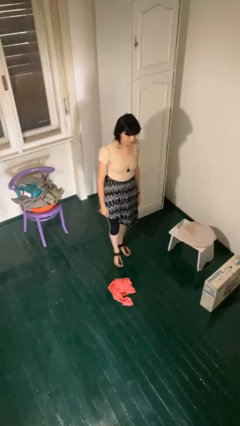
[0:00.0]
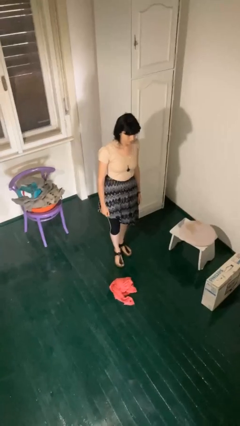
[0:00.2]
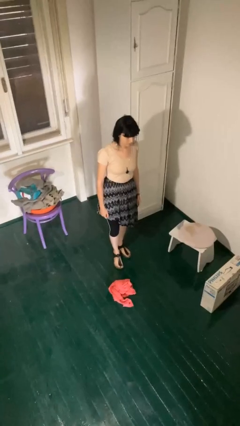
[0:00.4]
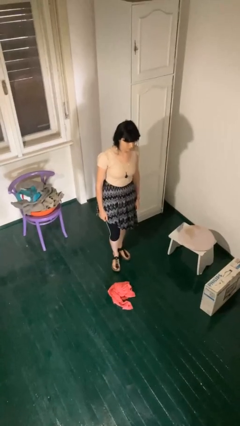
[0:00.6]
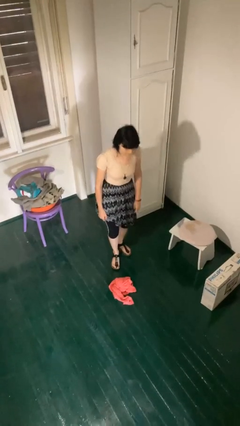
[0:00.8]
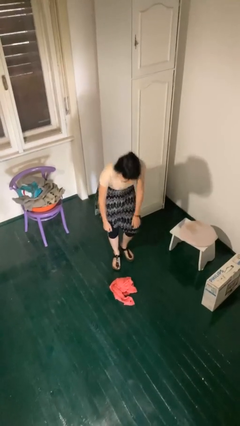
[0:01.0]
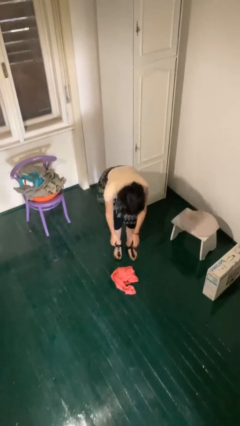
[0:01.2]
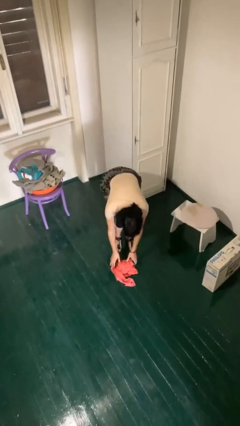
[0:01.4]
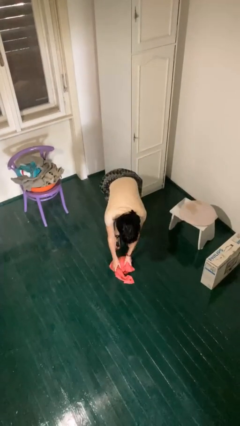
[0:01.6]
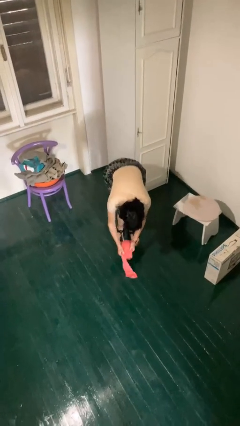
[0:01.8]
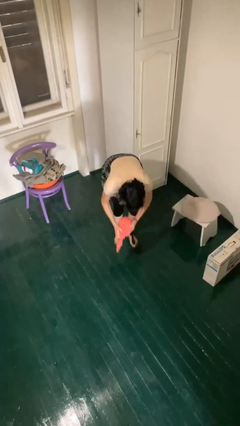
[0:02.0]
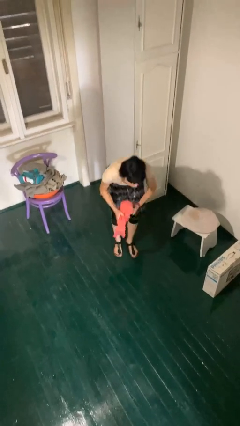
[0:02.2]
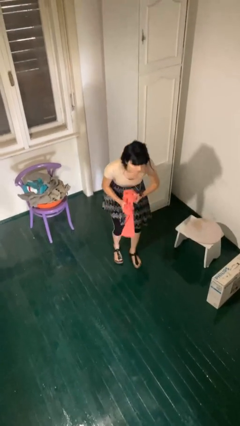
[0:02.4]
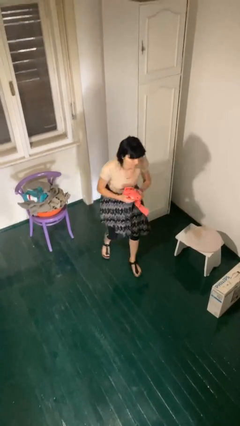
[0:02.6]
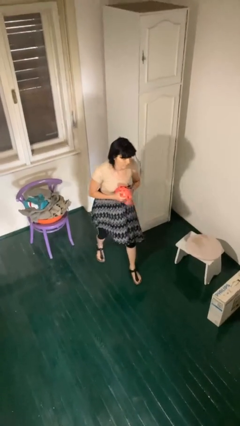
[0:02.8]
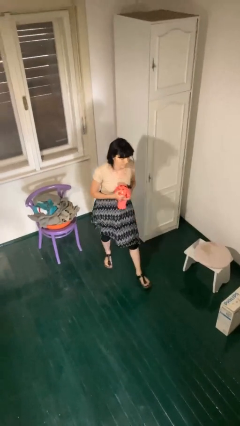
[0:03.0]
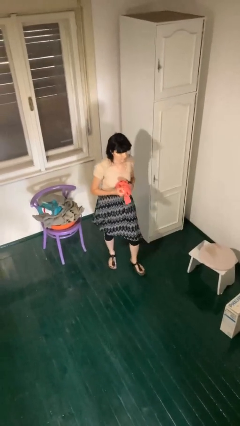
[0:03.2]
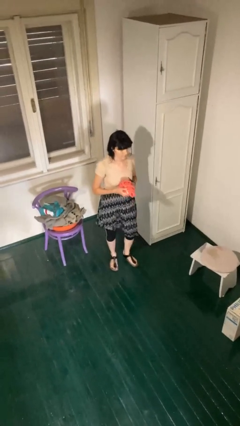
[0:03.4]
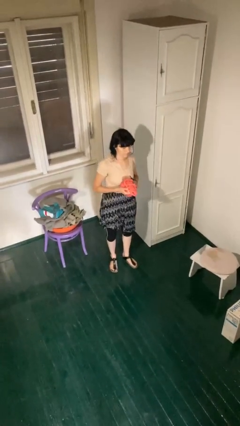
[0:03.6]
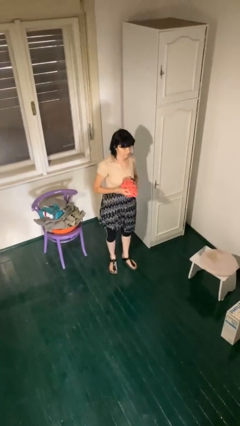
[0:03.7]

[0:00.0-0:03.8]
person picks up object from floor

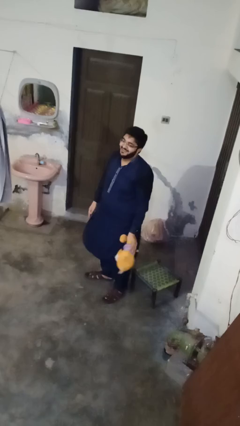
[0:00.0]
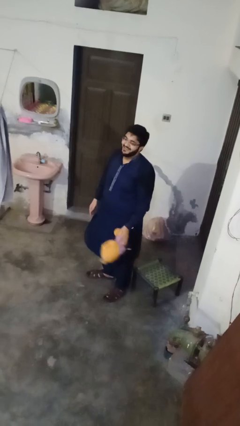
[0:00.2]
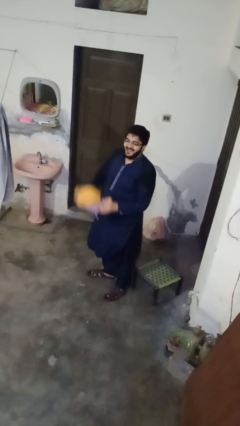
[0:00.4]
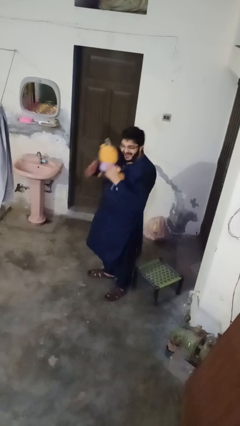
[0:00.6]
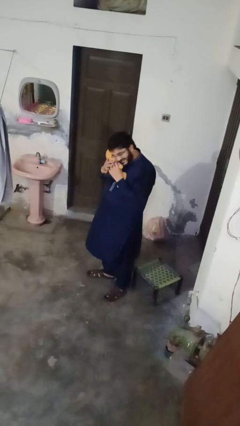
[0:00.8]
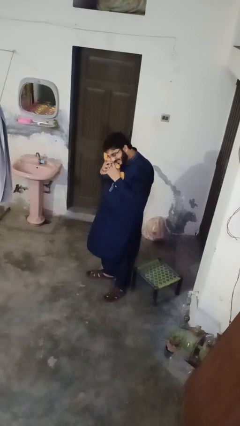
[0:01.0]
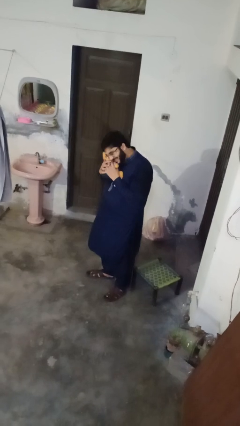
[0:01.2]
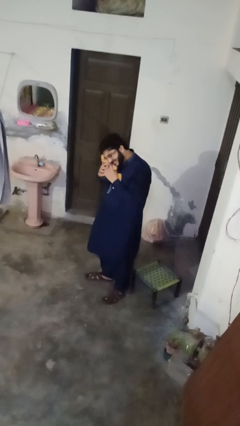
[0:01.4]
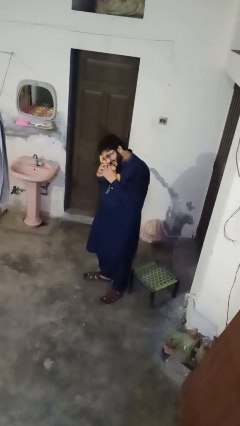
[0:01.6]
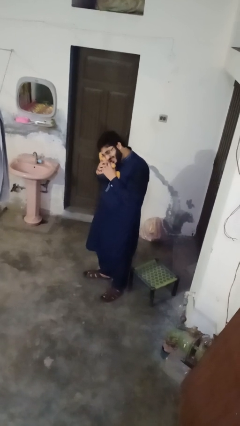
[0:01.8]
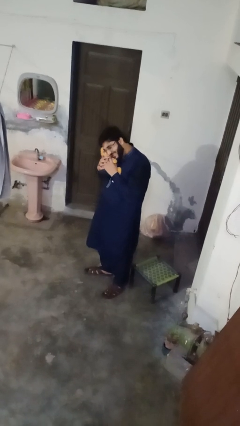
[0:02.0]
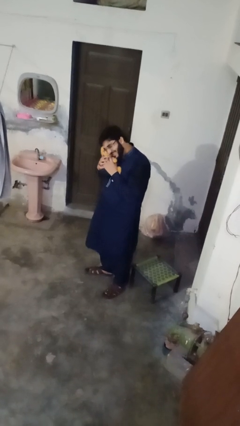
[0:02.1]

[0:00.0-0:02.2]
person hugs stuffed animal

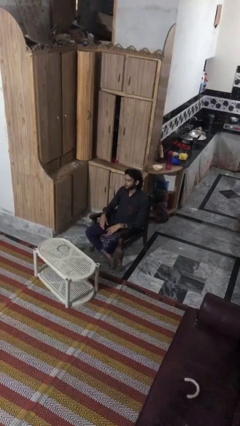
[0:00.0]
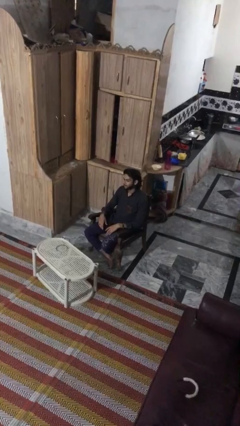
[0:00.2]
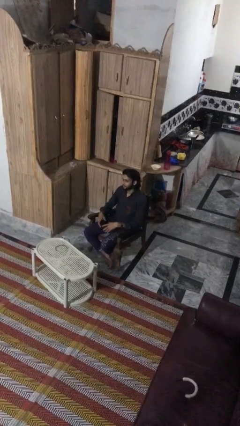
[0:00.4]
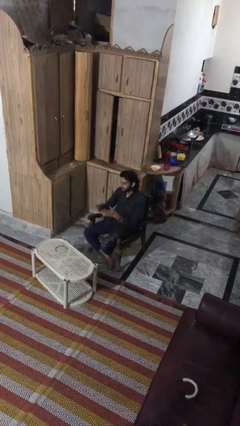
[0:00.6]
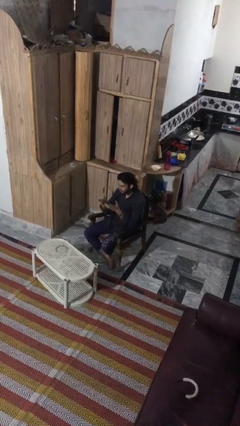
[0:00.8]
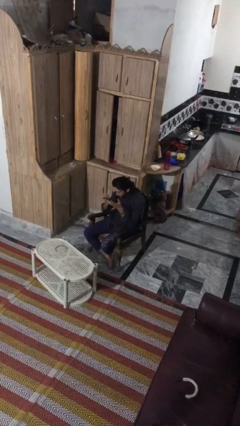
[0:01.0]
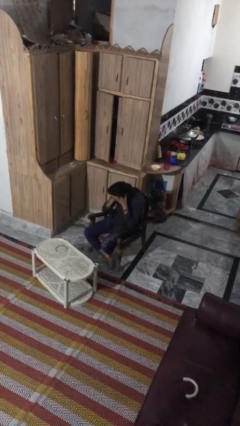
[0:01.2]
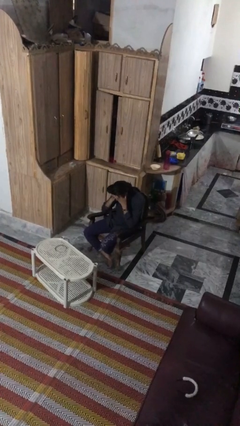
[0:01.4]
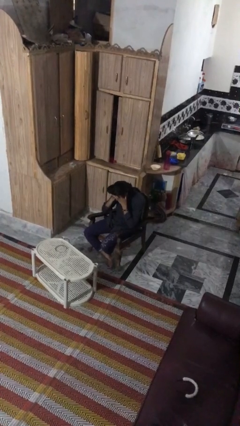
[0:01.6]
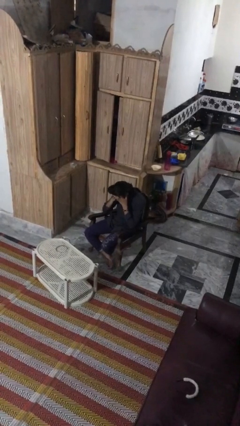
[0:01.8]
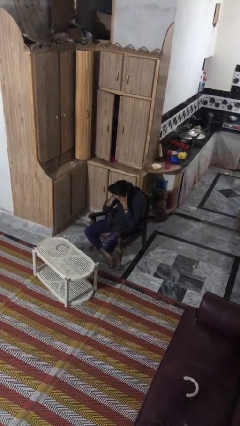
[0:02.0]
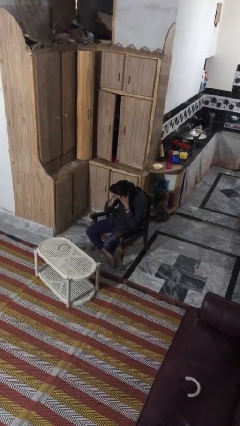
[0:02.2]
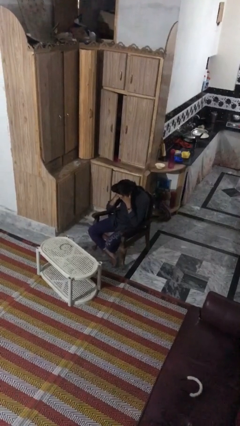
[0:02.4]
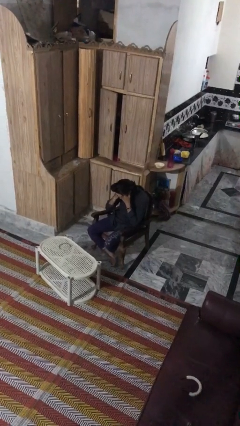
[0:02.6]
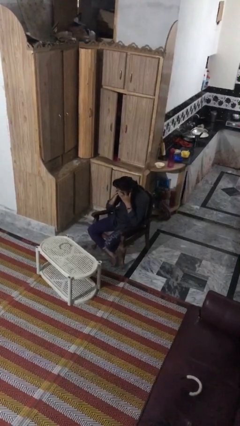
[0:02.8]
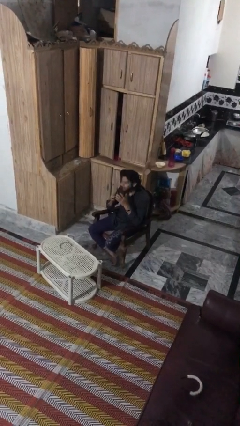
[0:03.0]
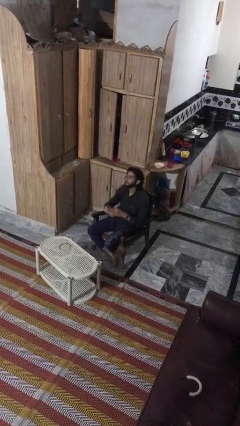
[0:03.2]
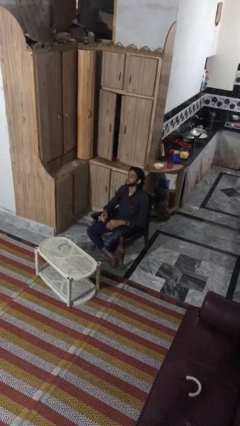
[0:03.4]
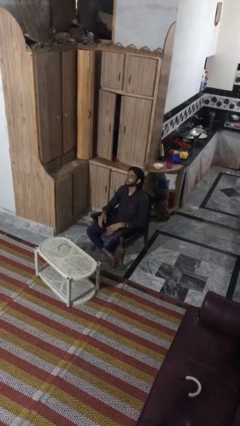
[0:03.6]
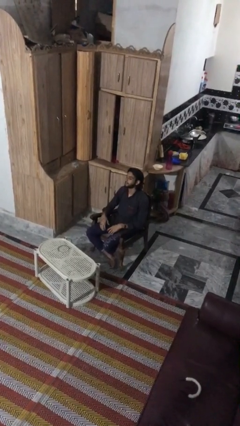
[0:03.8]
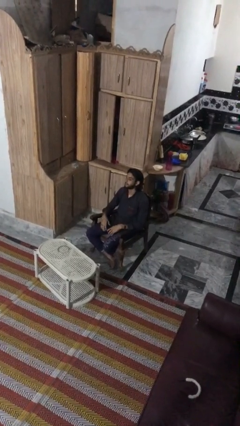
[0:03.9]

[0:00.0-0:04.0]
person covers face with hands

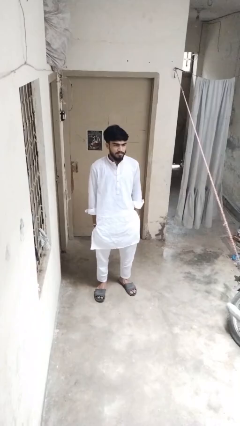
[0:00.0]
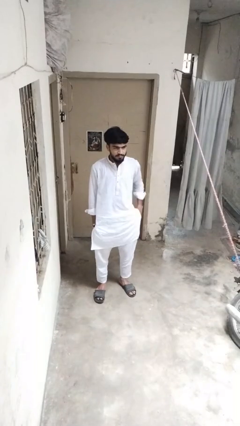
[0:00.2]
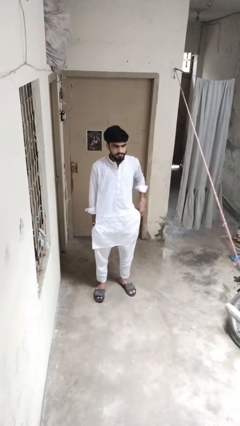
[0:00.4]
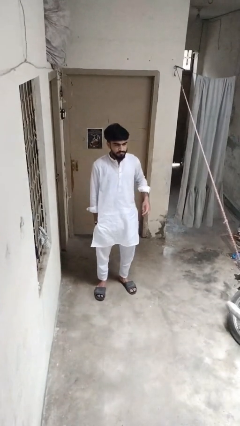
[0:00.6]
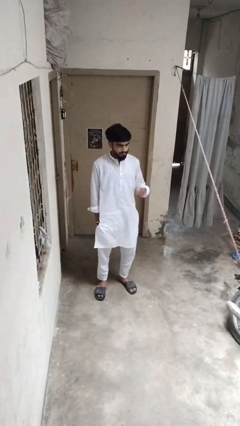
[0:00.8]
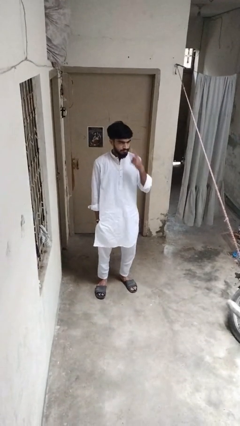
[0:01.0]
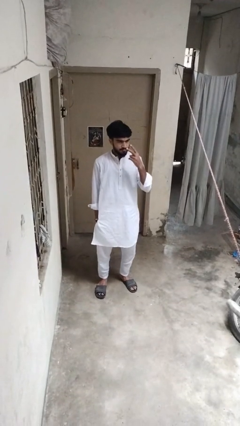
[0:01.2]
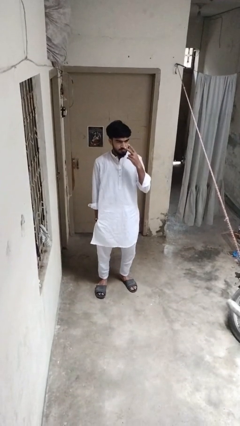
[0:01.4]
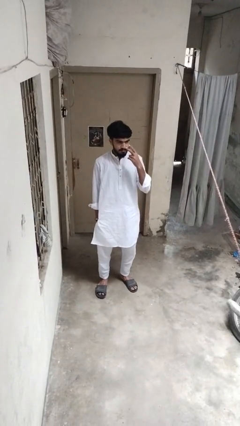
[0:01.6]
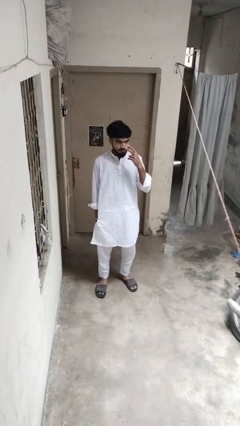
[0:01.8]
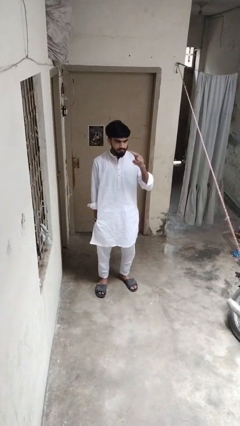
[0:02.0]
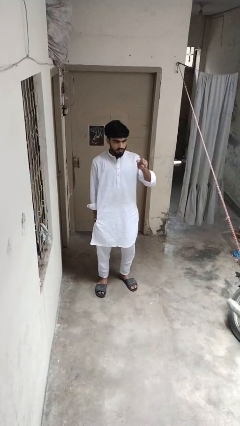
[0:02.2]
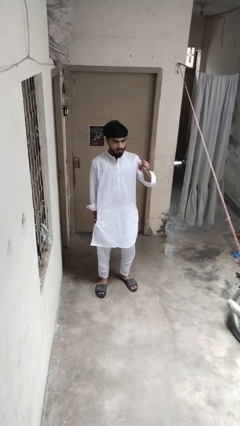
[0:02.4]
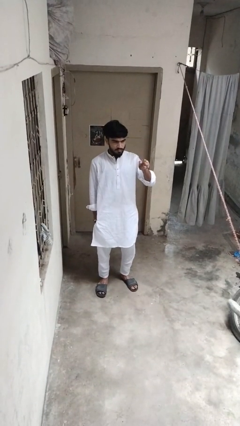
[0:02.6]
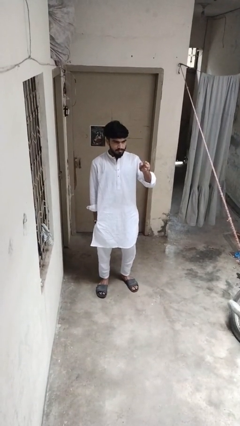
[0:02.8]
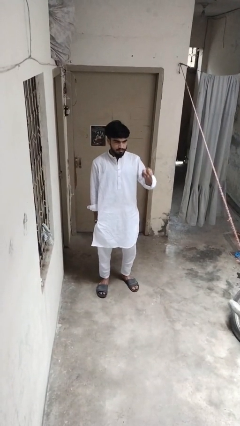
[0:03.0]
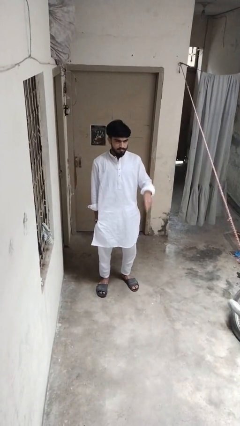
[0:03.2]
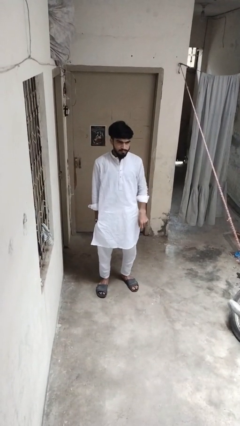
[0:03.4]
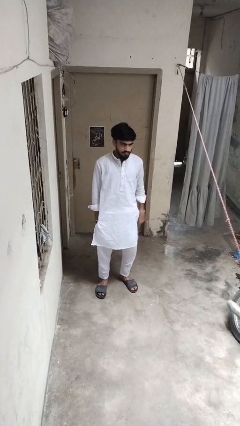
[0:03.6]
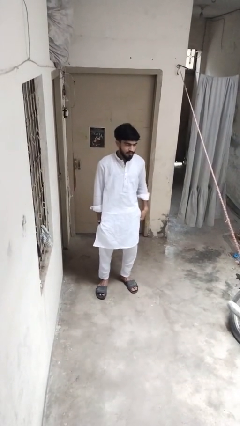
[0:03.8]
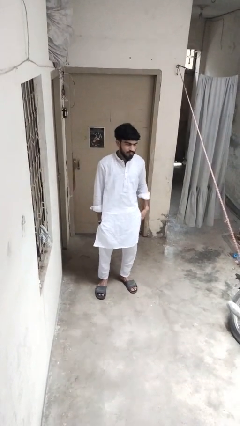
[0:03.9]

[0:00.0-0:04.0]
person gestures watch closely

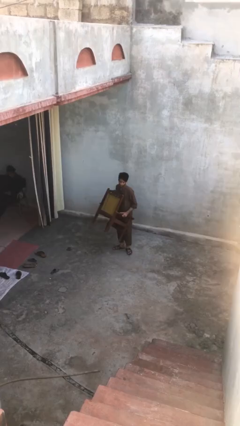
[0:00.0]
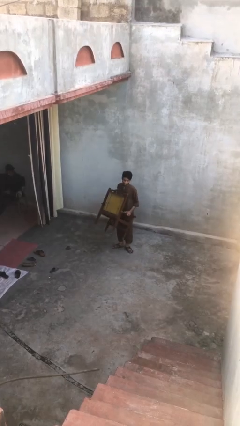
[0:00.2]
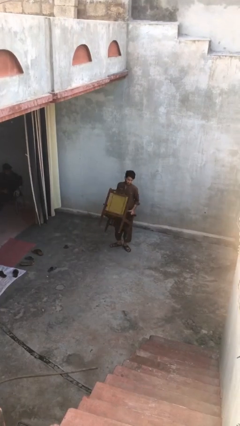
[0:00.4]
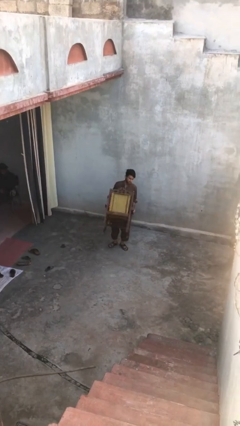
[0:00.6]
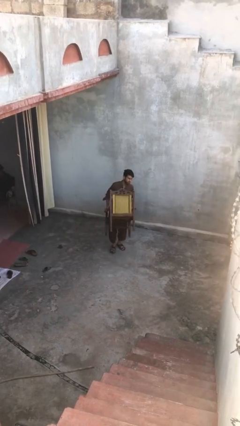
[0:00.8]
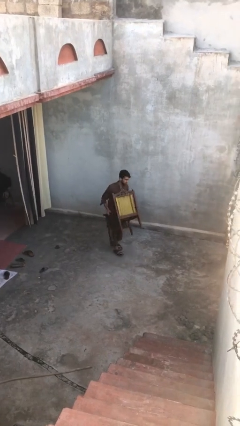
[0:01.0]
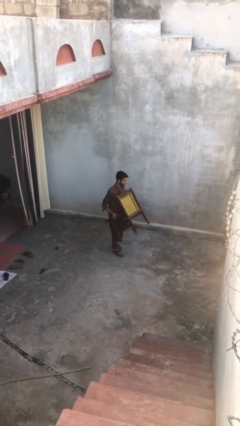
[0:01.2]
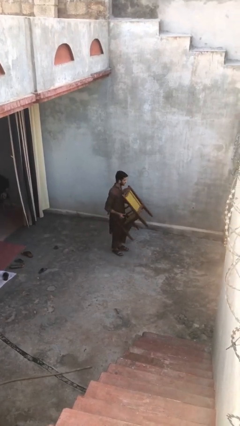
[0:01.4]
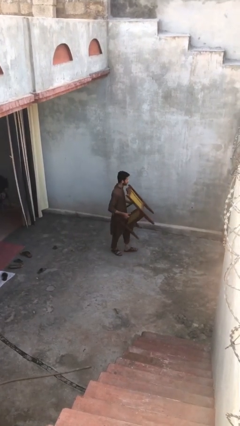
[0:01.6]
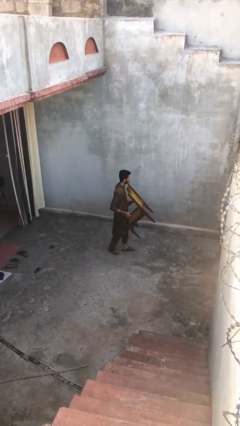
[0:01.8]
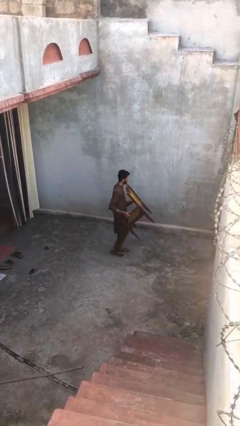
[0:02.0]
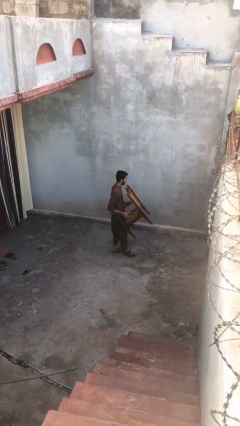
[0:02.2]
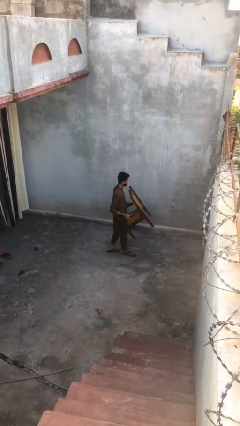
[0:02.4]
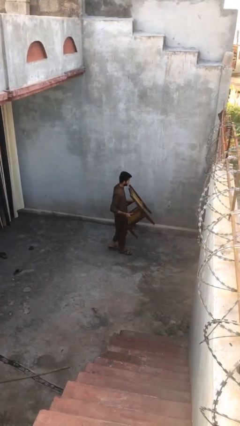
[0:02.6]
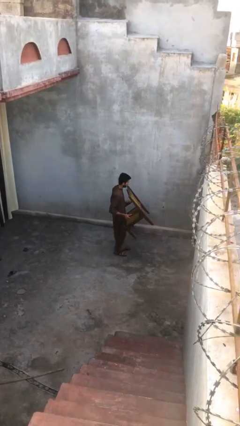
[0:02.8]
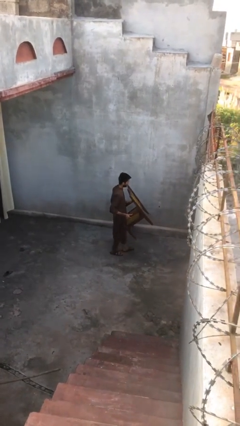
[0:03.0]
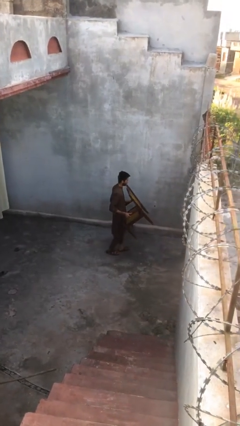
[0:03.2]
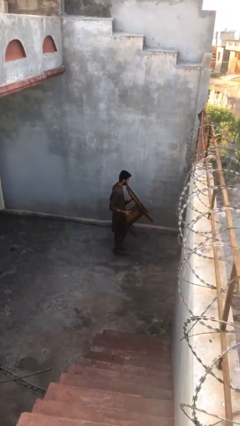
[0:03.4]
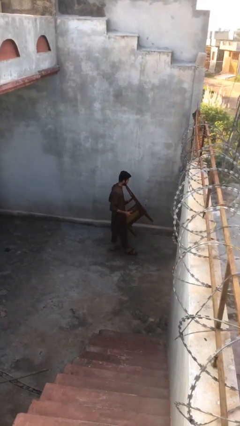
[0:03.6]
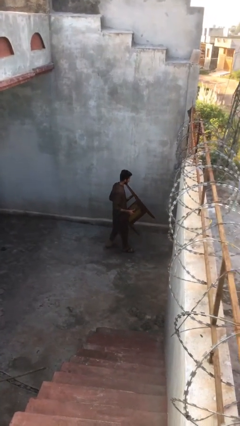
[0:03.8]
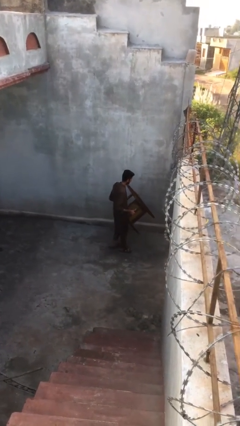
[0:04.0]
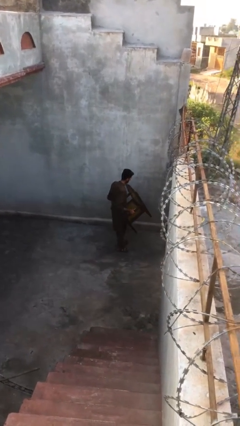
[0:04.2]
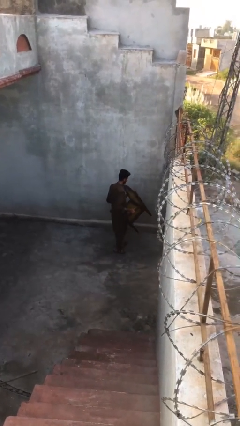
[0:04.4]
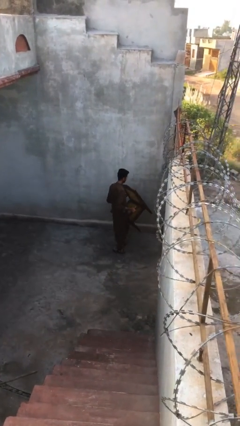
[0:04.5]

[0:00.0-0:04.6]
person carries heavy object
